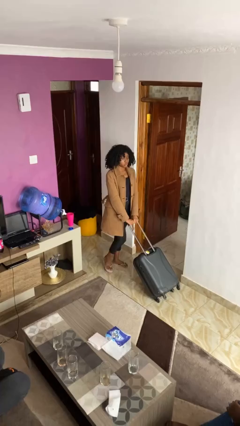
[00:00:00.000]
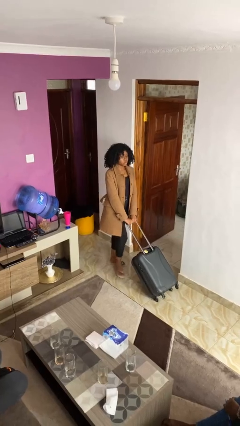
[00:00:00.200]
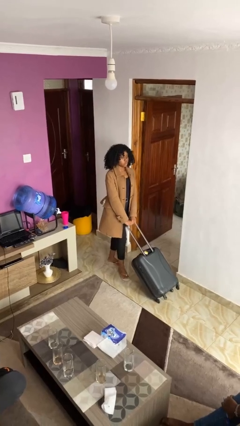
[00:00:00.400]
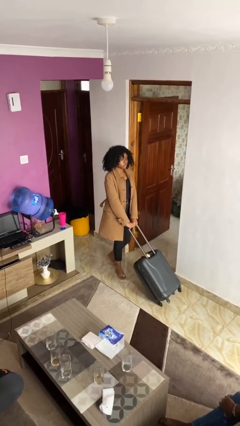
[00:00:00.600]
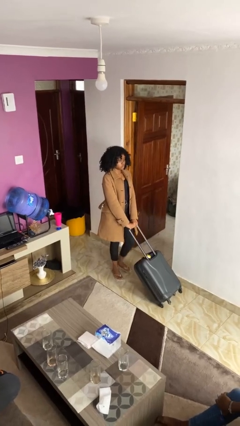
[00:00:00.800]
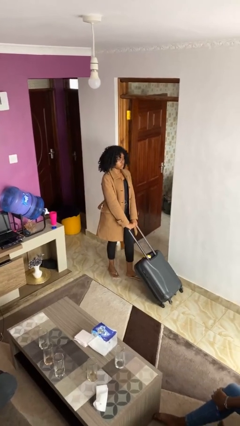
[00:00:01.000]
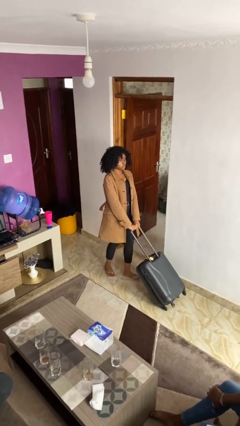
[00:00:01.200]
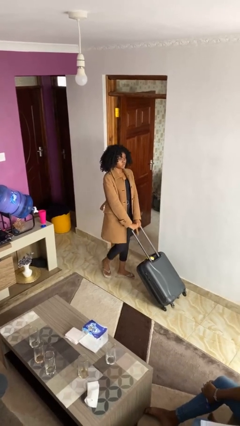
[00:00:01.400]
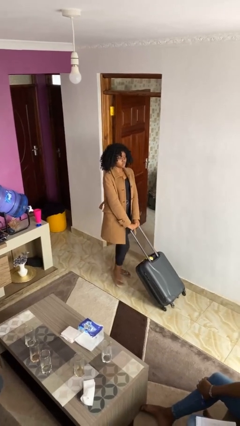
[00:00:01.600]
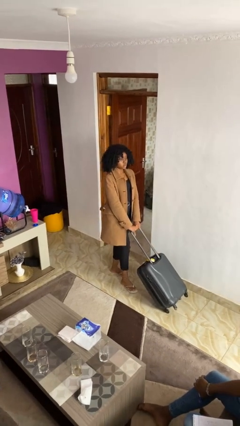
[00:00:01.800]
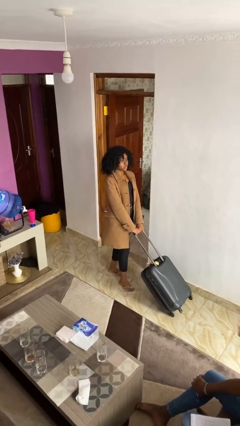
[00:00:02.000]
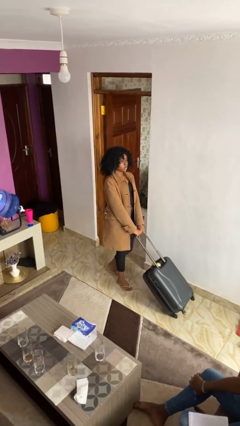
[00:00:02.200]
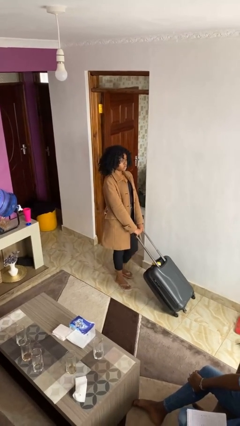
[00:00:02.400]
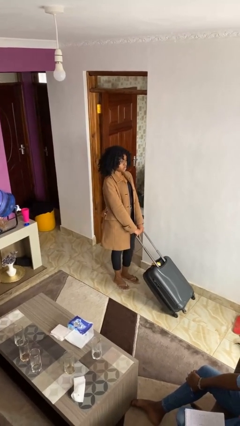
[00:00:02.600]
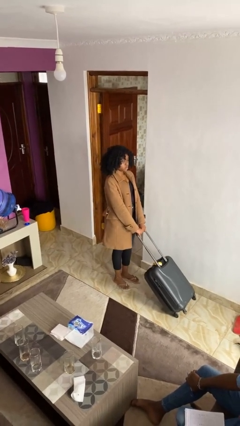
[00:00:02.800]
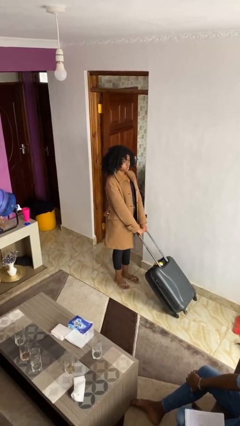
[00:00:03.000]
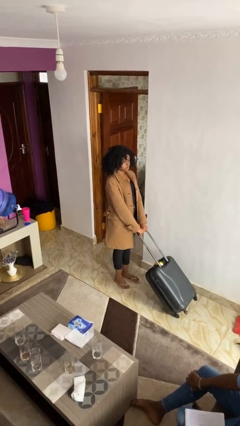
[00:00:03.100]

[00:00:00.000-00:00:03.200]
person pushes wheeled cart

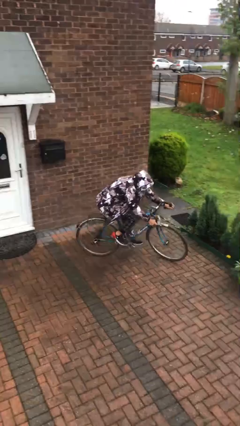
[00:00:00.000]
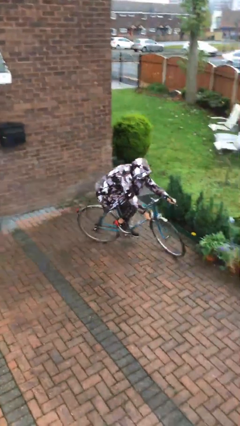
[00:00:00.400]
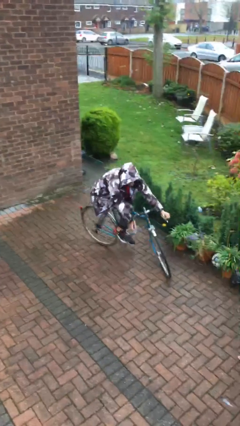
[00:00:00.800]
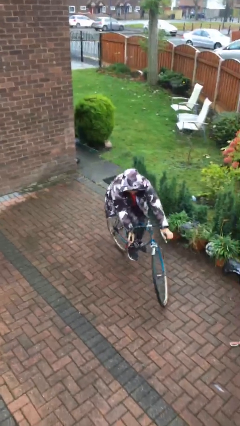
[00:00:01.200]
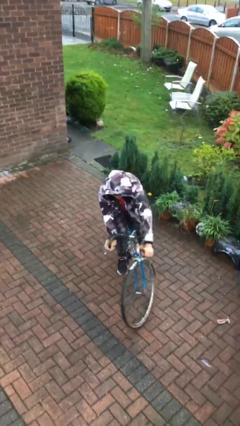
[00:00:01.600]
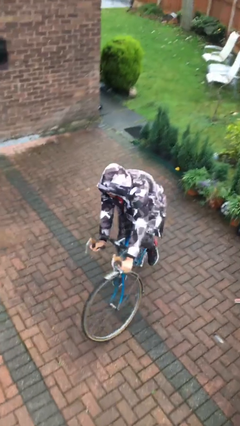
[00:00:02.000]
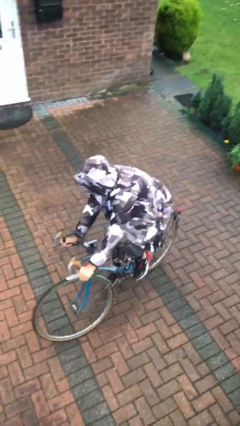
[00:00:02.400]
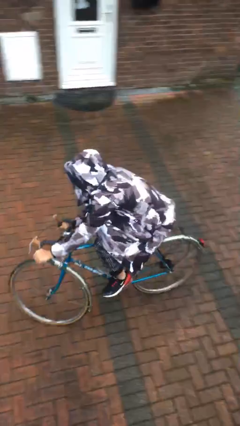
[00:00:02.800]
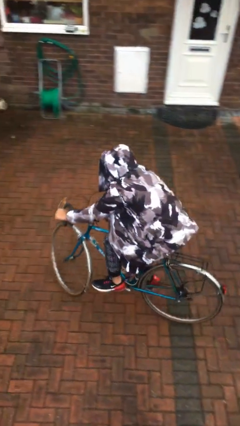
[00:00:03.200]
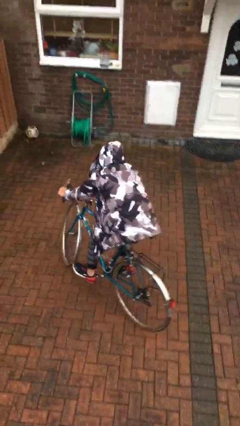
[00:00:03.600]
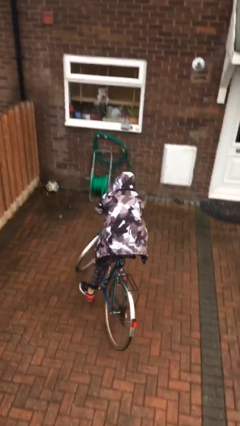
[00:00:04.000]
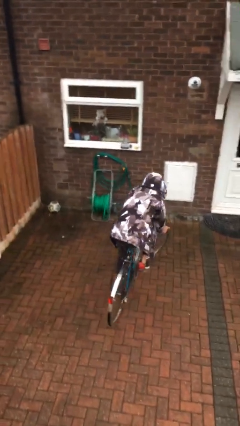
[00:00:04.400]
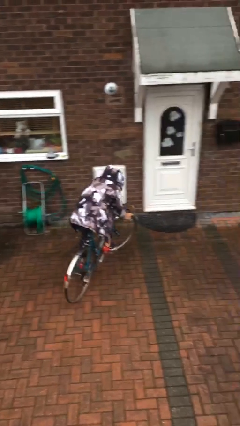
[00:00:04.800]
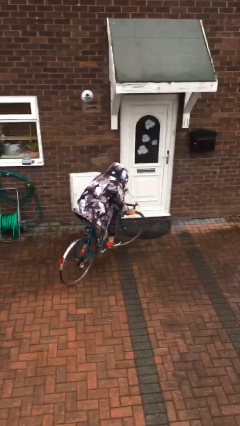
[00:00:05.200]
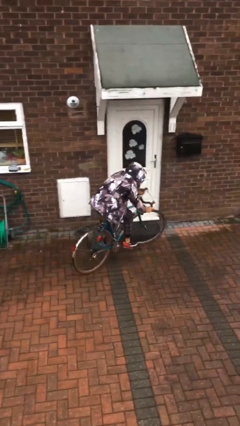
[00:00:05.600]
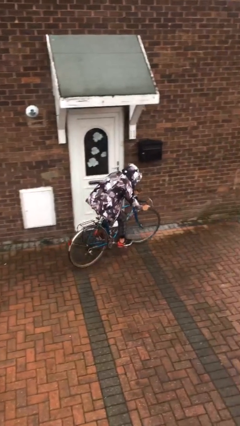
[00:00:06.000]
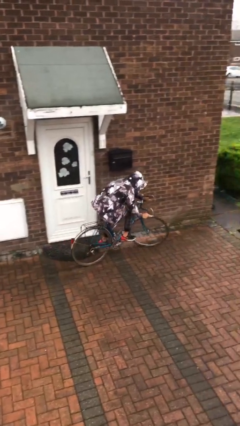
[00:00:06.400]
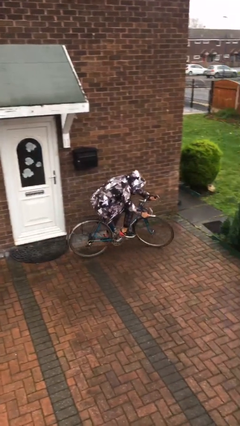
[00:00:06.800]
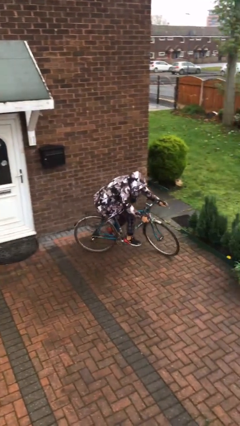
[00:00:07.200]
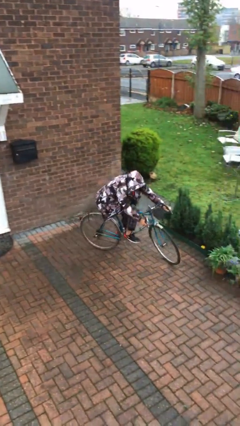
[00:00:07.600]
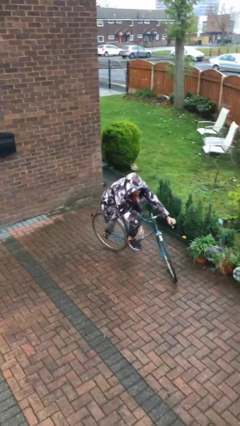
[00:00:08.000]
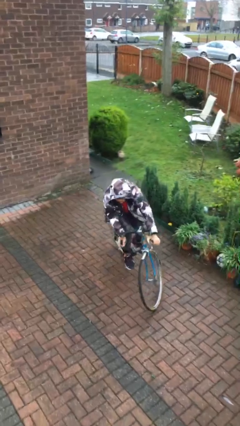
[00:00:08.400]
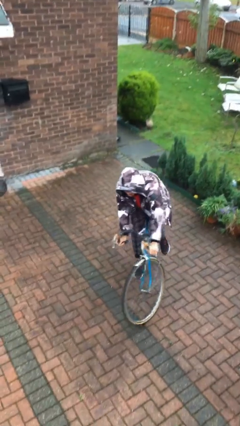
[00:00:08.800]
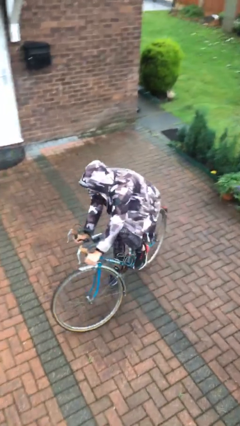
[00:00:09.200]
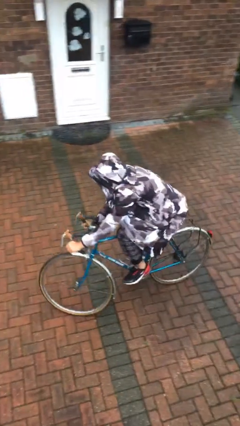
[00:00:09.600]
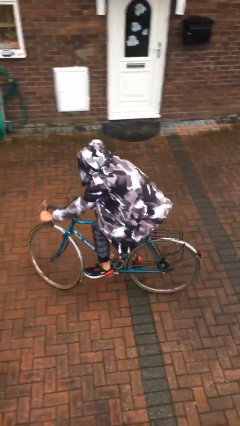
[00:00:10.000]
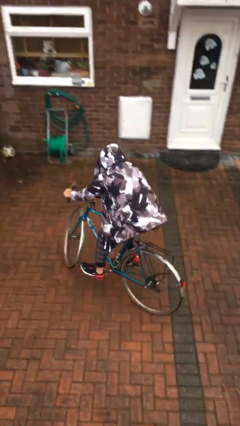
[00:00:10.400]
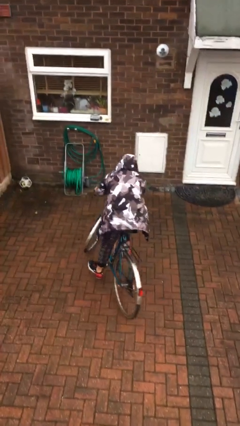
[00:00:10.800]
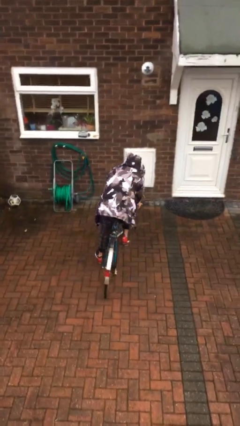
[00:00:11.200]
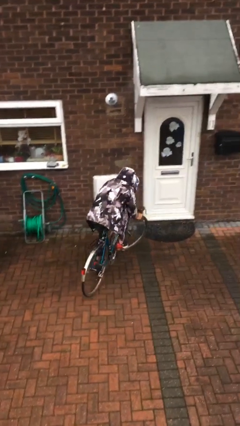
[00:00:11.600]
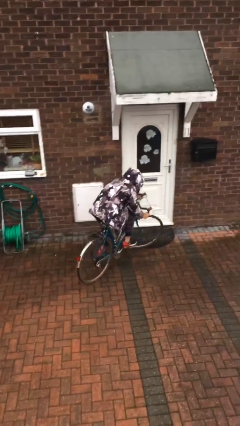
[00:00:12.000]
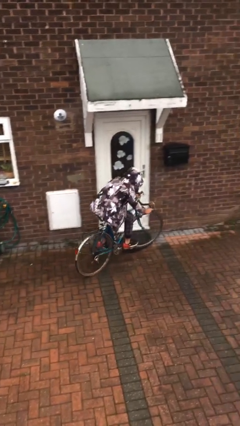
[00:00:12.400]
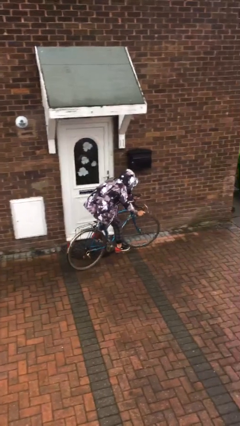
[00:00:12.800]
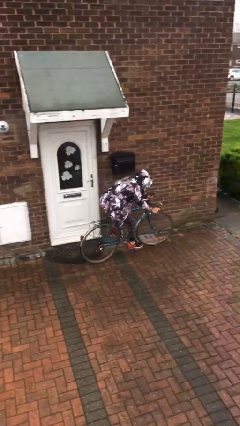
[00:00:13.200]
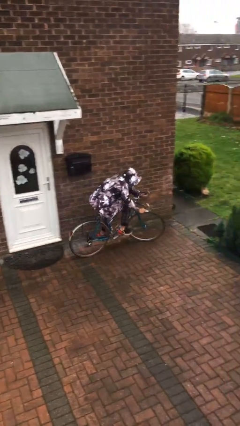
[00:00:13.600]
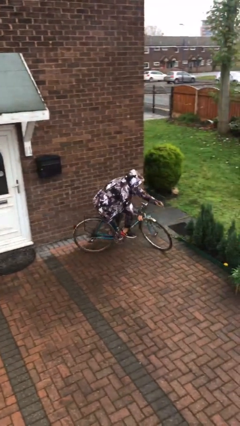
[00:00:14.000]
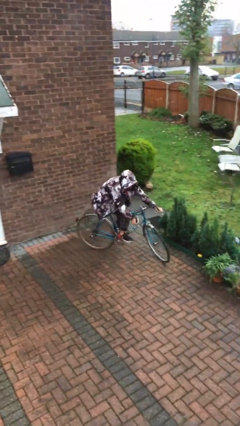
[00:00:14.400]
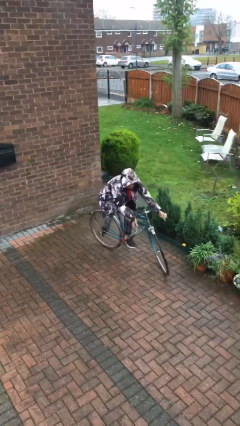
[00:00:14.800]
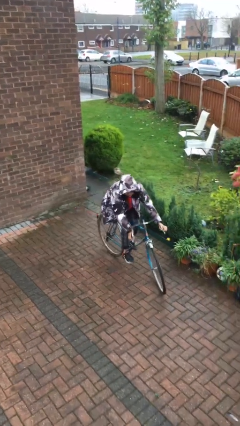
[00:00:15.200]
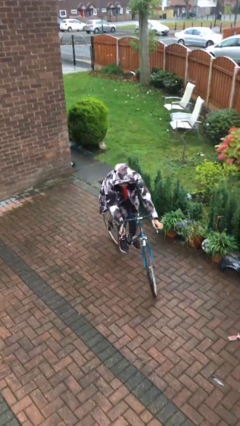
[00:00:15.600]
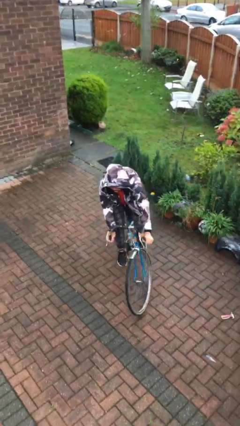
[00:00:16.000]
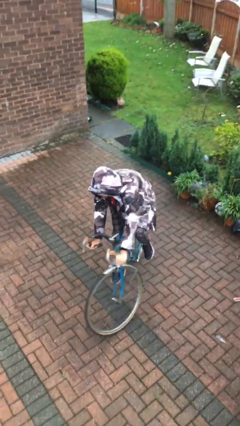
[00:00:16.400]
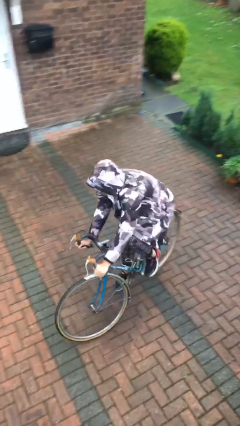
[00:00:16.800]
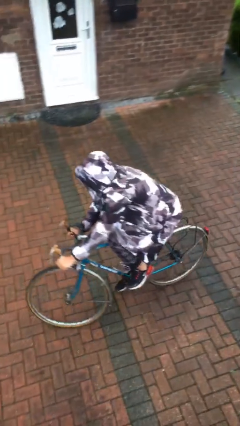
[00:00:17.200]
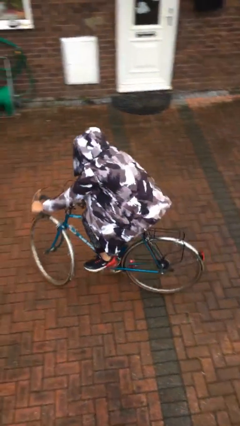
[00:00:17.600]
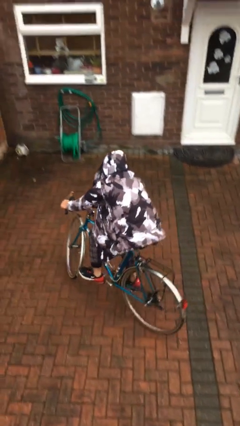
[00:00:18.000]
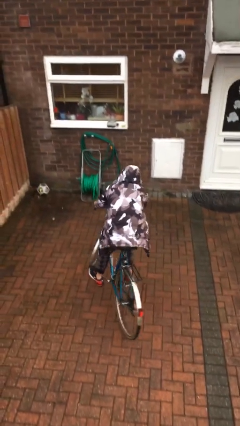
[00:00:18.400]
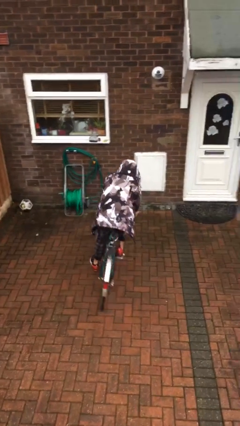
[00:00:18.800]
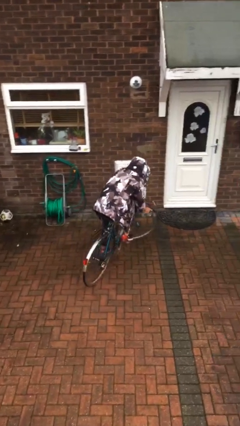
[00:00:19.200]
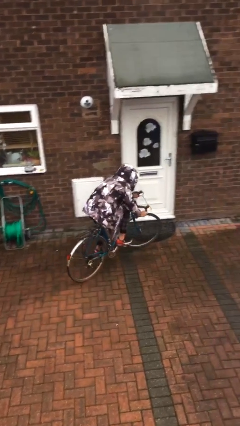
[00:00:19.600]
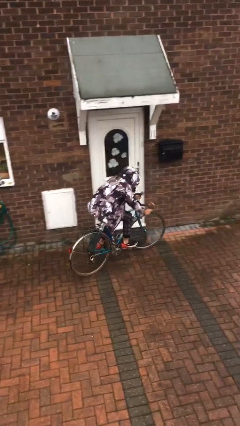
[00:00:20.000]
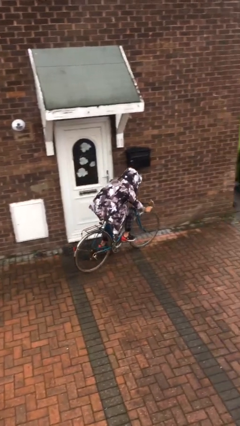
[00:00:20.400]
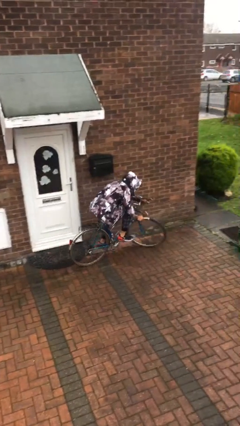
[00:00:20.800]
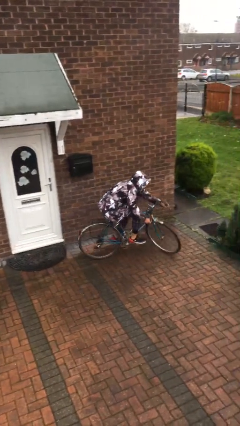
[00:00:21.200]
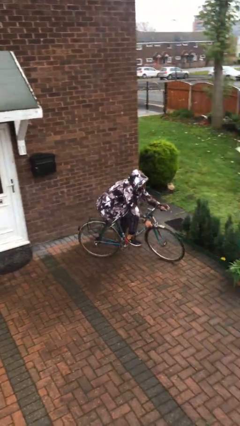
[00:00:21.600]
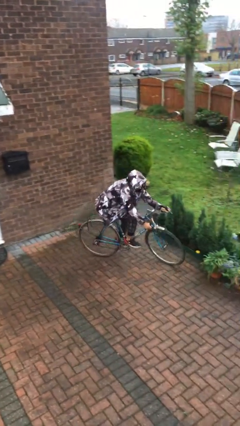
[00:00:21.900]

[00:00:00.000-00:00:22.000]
person rides bicycle

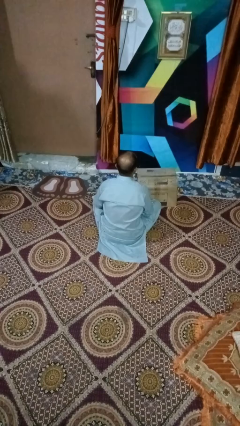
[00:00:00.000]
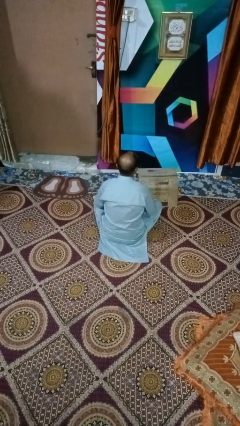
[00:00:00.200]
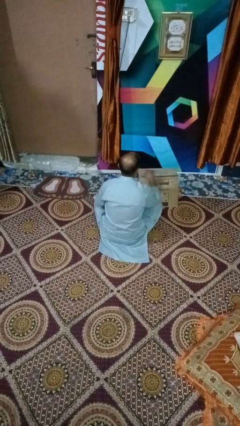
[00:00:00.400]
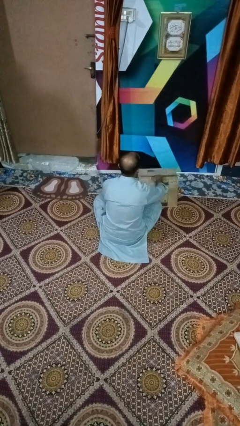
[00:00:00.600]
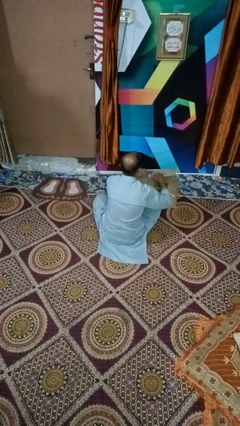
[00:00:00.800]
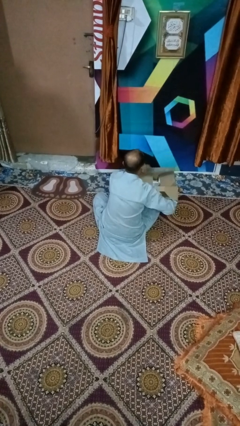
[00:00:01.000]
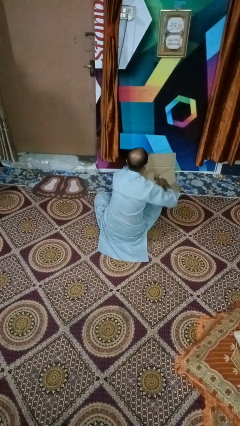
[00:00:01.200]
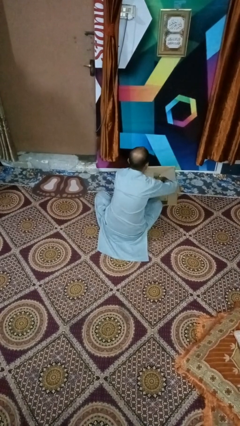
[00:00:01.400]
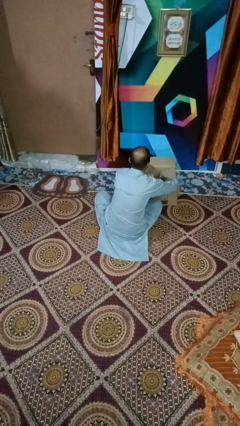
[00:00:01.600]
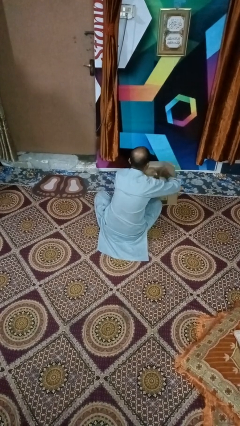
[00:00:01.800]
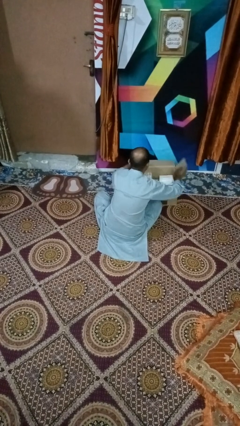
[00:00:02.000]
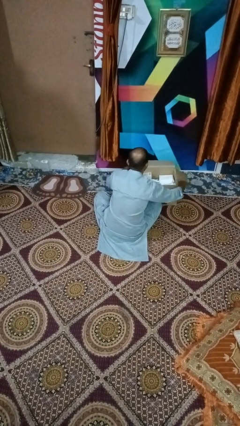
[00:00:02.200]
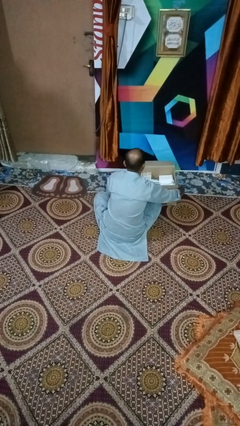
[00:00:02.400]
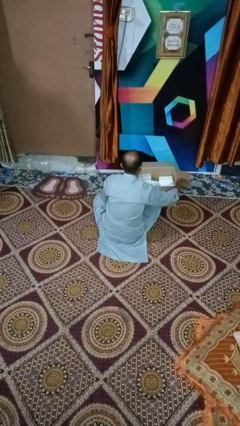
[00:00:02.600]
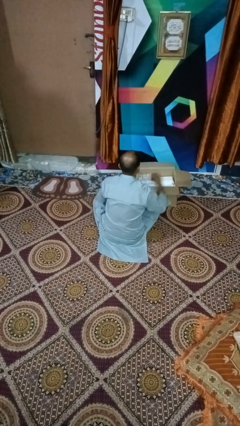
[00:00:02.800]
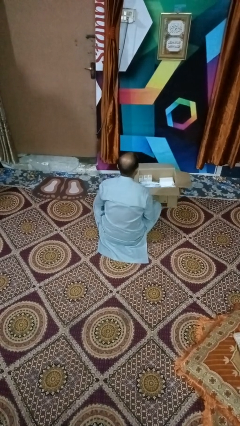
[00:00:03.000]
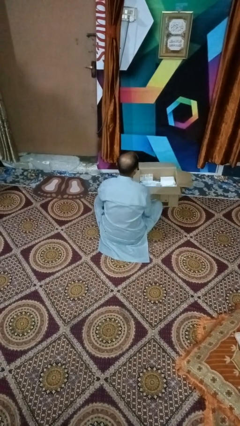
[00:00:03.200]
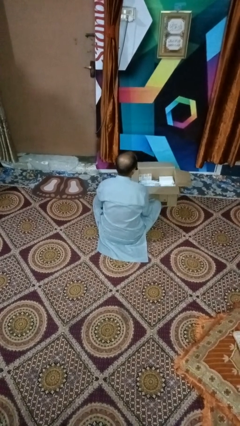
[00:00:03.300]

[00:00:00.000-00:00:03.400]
person opens box

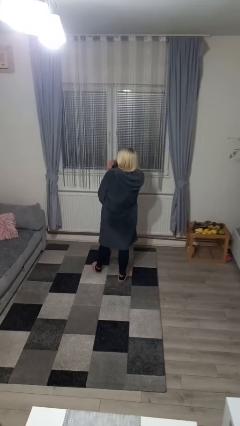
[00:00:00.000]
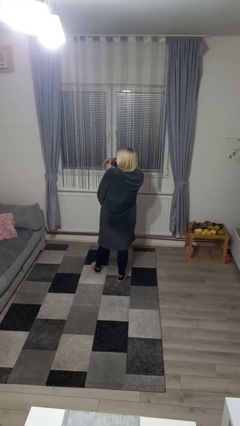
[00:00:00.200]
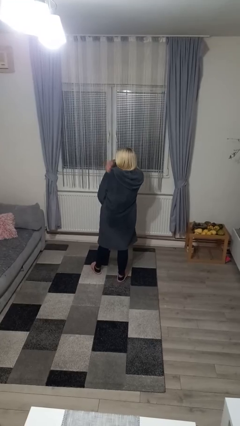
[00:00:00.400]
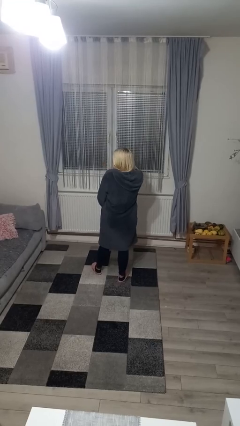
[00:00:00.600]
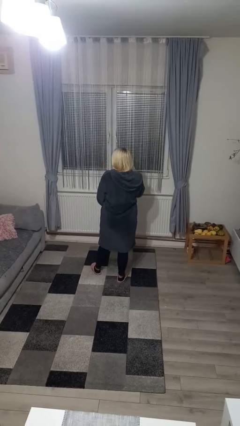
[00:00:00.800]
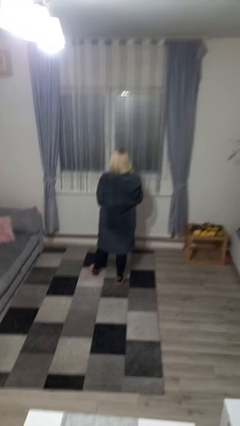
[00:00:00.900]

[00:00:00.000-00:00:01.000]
person swats bug
